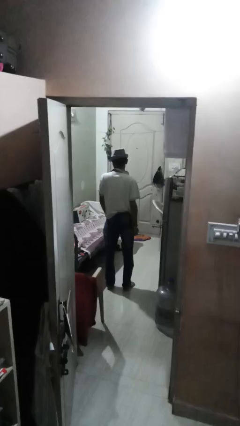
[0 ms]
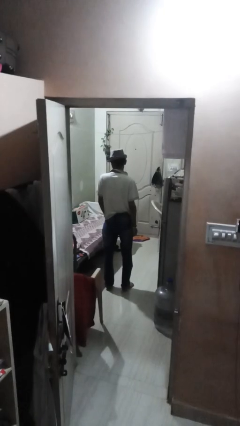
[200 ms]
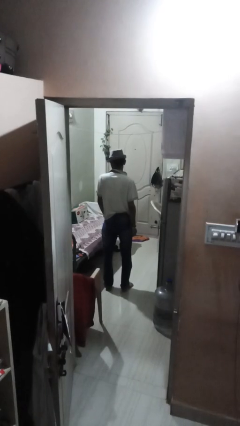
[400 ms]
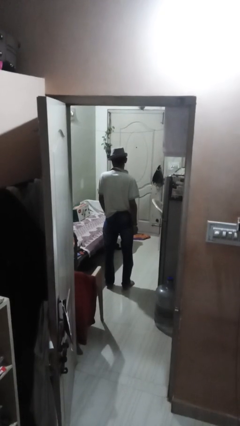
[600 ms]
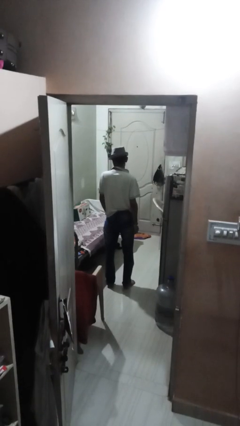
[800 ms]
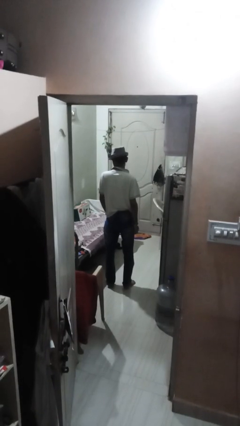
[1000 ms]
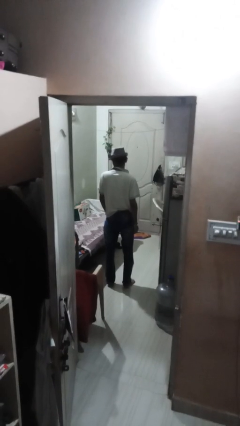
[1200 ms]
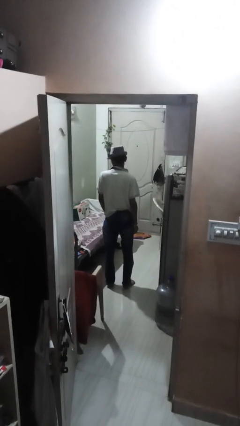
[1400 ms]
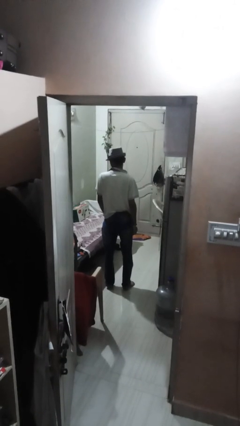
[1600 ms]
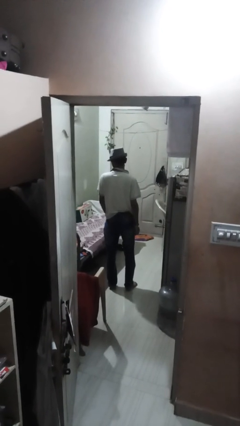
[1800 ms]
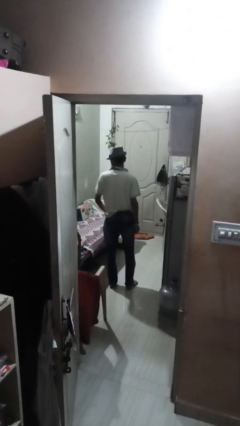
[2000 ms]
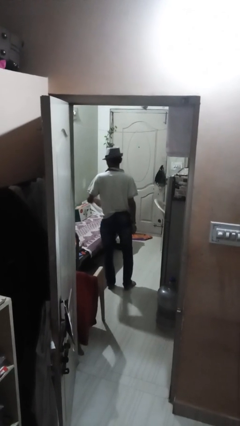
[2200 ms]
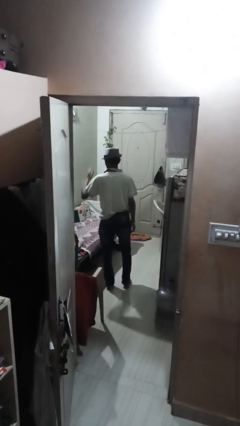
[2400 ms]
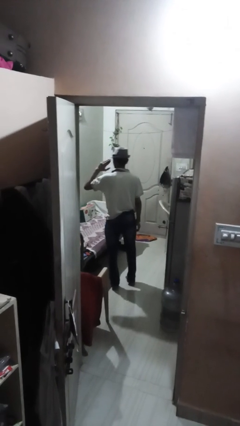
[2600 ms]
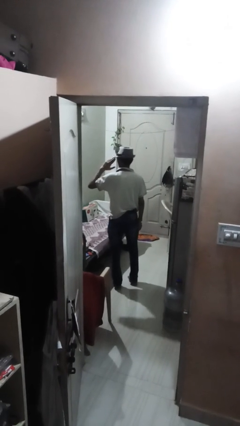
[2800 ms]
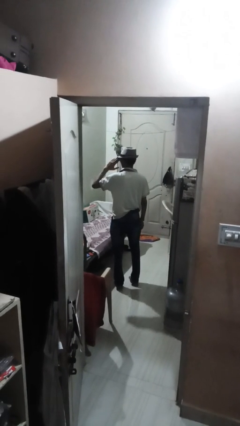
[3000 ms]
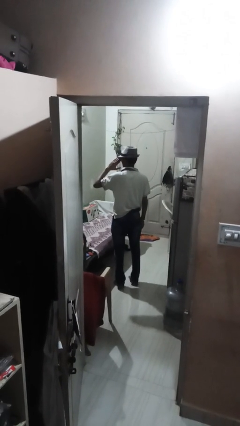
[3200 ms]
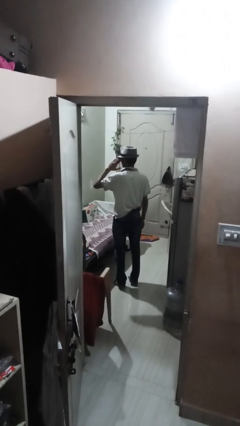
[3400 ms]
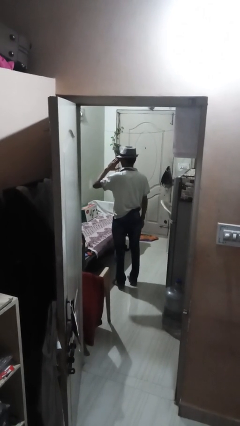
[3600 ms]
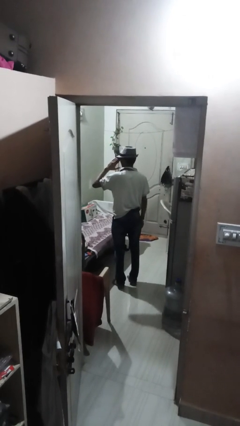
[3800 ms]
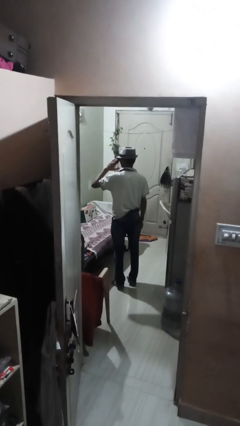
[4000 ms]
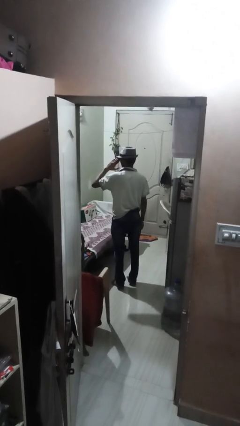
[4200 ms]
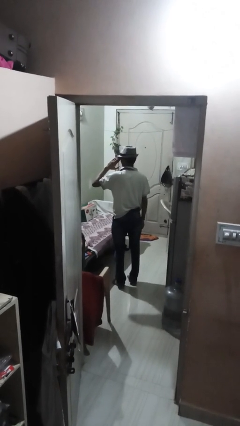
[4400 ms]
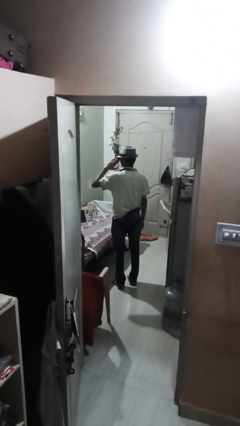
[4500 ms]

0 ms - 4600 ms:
person salutes

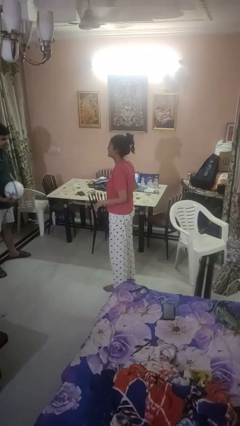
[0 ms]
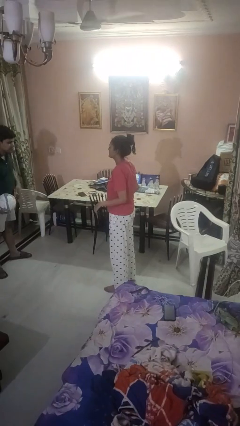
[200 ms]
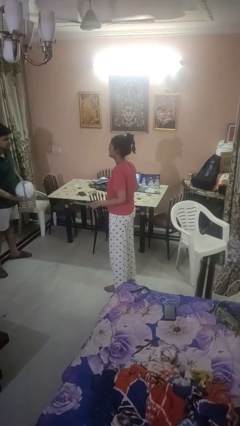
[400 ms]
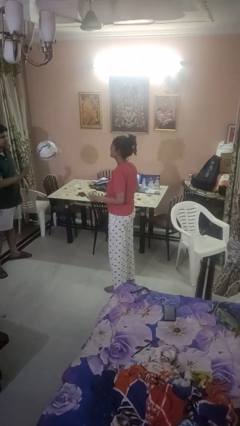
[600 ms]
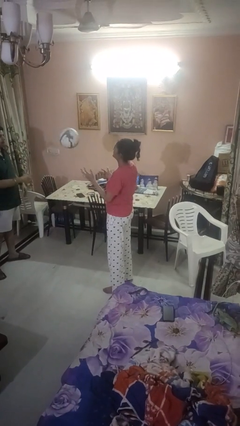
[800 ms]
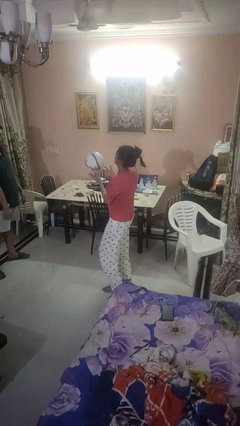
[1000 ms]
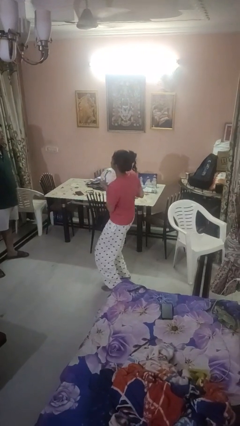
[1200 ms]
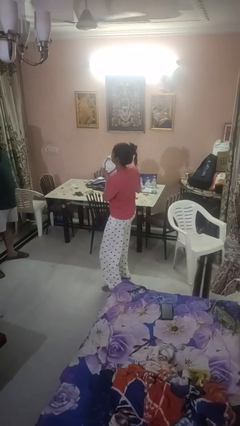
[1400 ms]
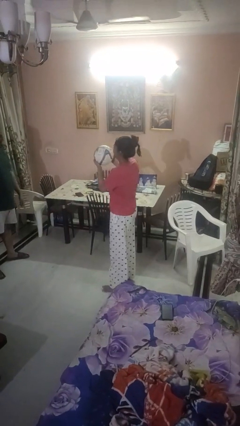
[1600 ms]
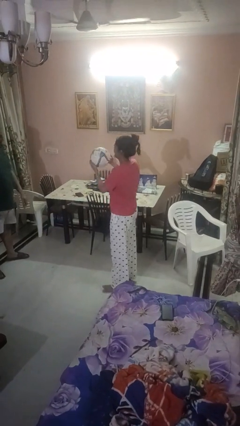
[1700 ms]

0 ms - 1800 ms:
person catches object from person

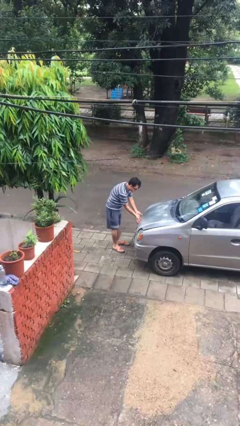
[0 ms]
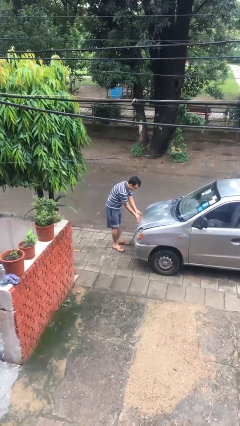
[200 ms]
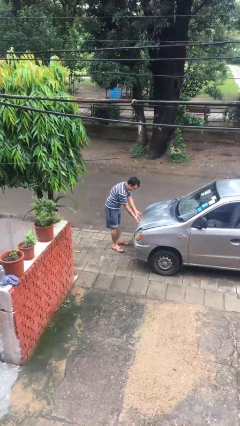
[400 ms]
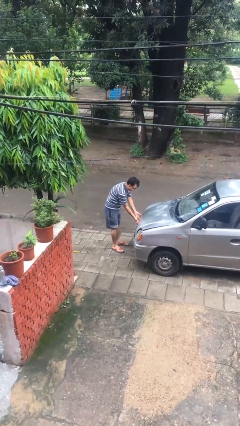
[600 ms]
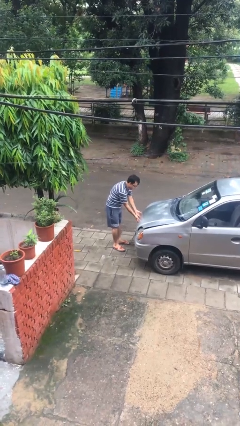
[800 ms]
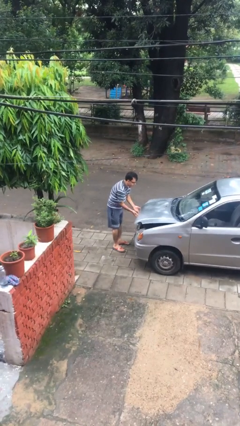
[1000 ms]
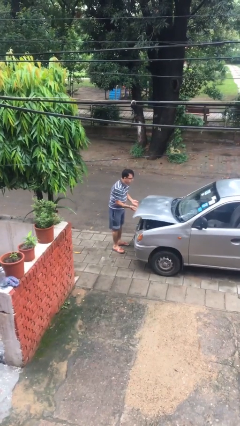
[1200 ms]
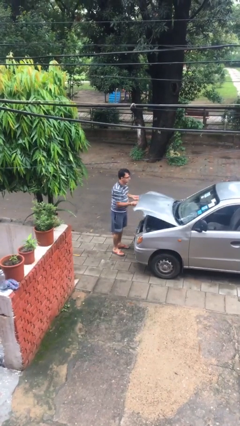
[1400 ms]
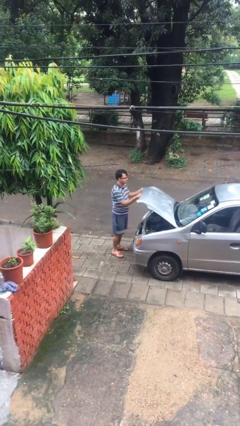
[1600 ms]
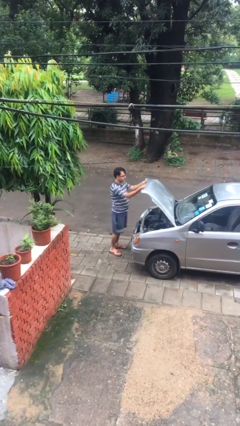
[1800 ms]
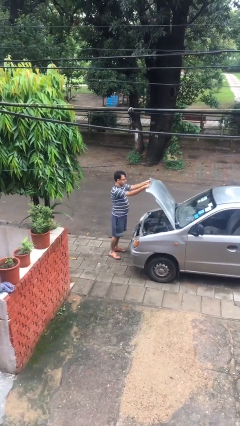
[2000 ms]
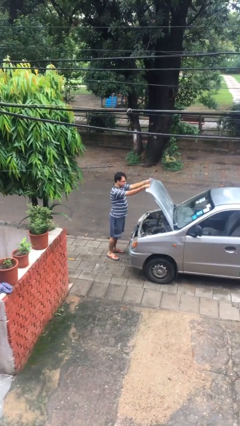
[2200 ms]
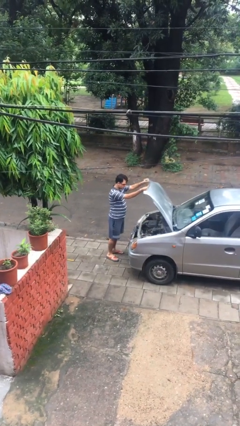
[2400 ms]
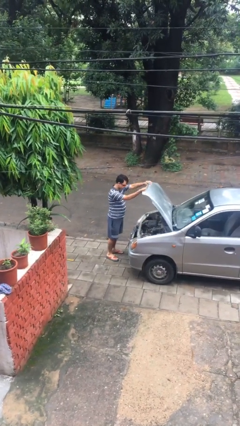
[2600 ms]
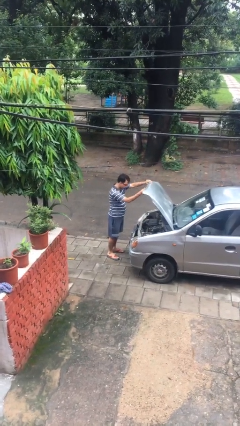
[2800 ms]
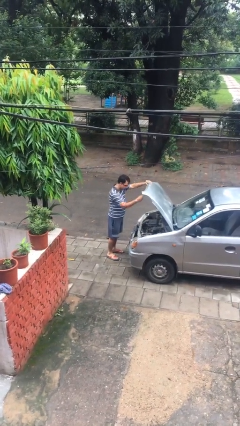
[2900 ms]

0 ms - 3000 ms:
person opens car hood

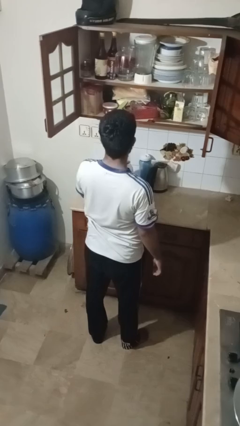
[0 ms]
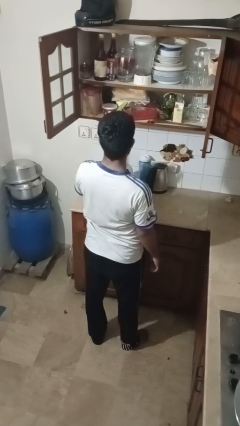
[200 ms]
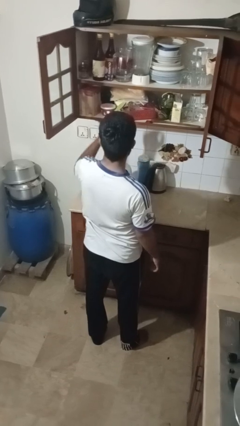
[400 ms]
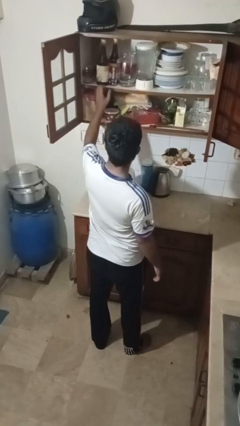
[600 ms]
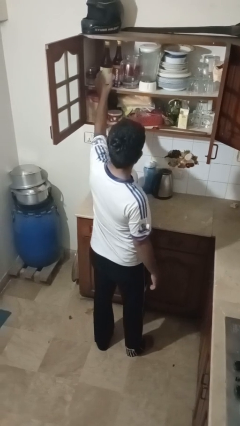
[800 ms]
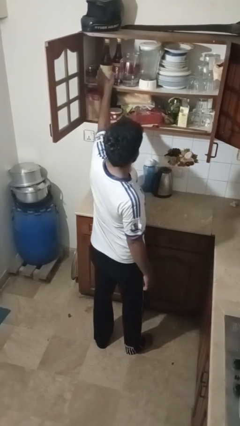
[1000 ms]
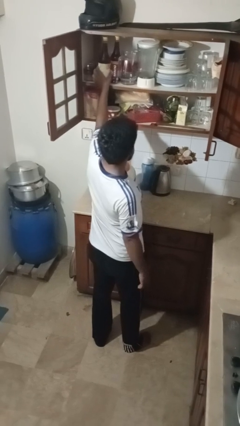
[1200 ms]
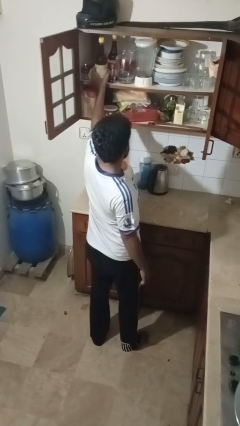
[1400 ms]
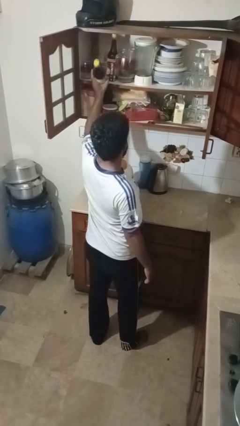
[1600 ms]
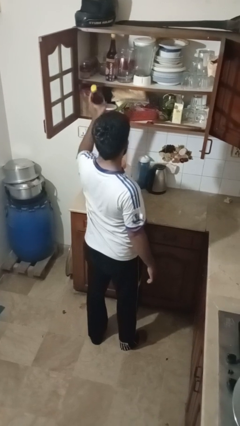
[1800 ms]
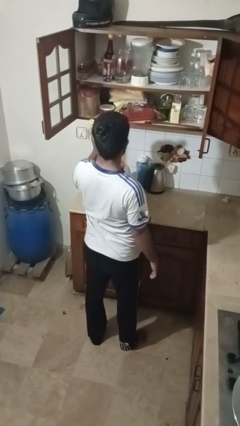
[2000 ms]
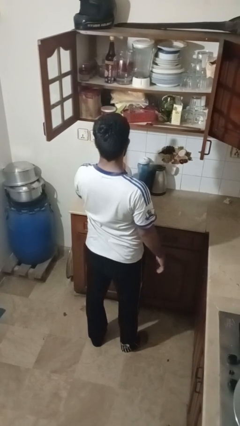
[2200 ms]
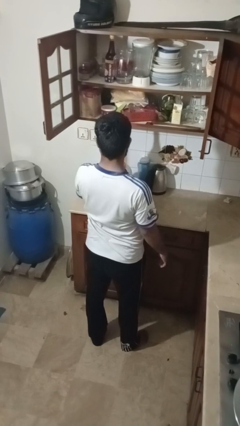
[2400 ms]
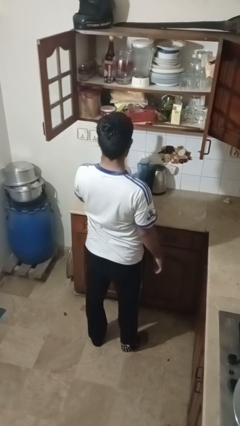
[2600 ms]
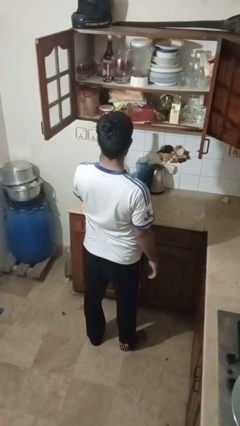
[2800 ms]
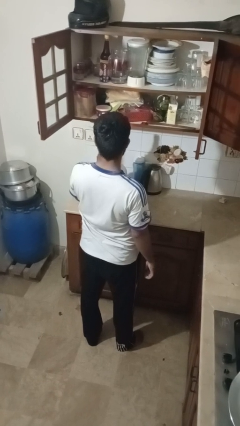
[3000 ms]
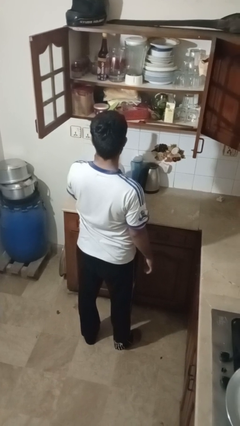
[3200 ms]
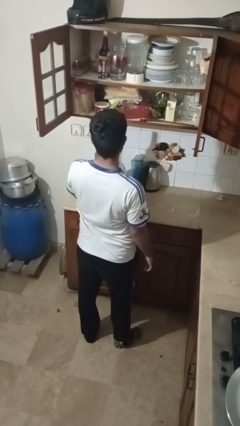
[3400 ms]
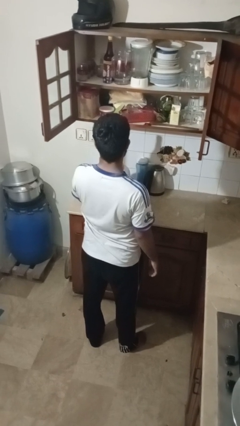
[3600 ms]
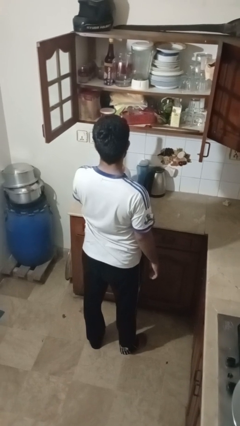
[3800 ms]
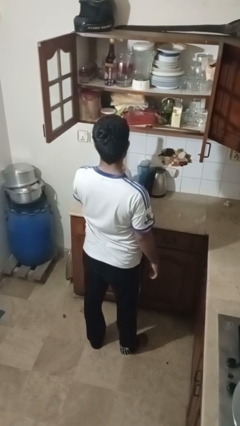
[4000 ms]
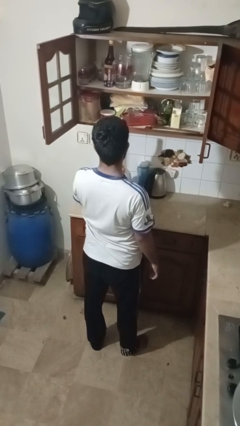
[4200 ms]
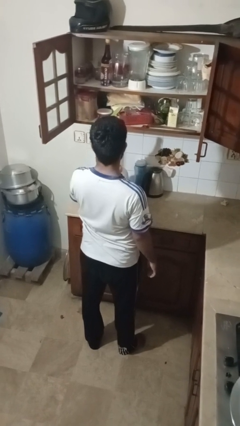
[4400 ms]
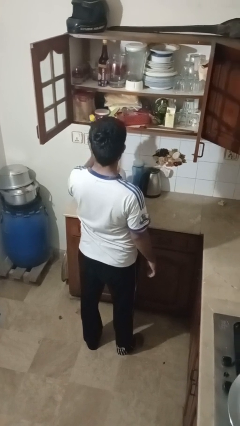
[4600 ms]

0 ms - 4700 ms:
person takes object from cabinet

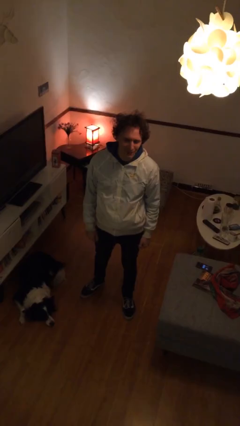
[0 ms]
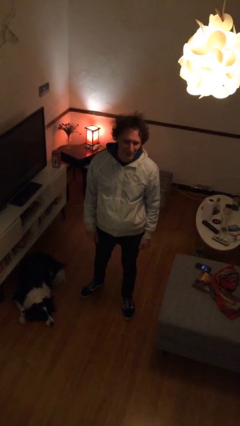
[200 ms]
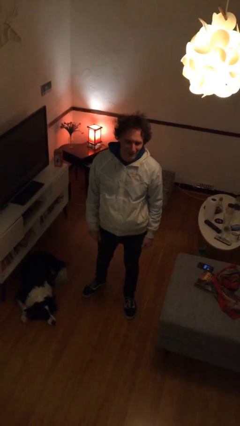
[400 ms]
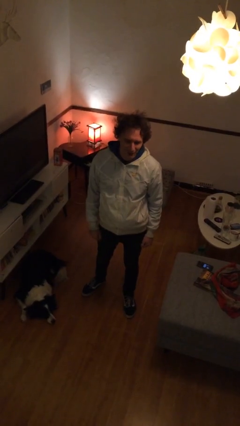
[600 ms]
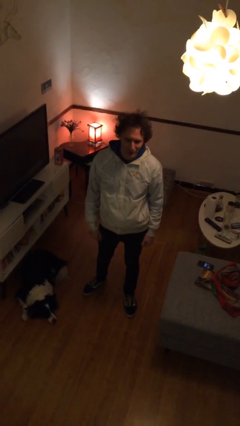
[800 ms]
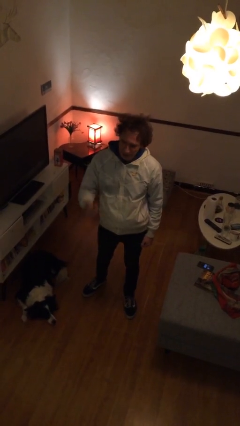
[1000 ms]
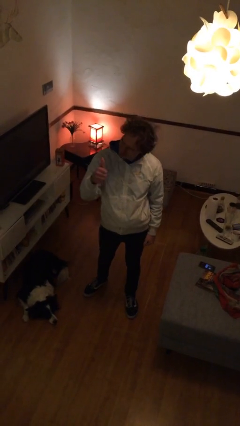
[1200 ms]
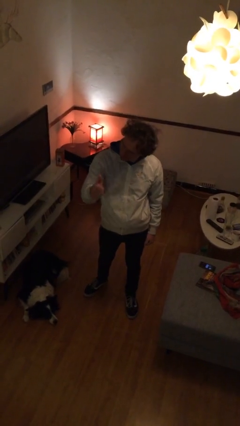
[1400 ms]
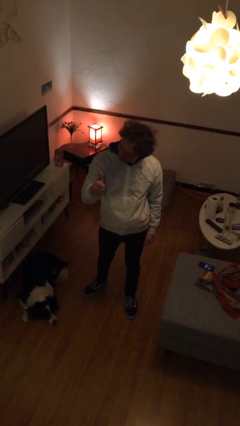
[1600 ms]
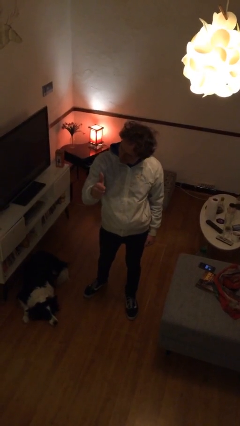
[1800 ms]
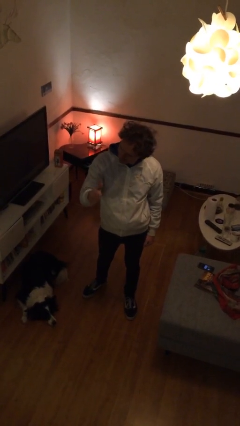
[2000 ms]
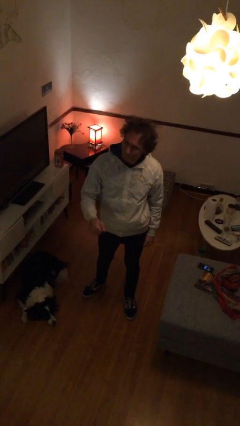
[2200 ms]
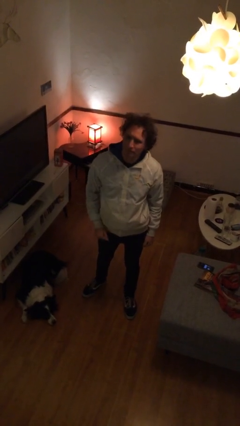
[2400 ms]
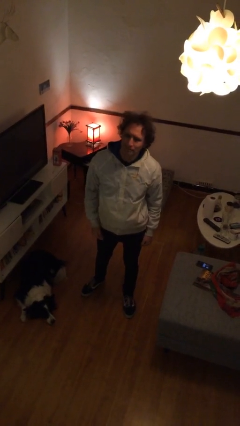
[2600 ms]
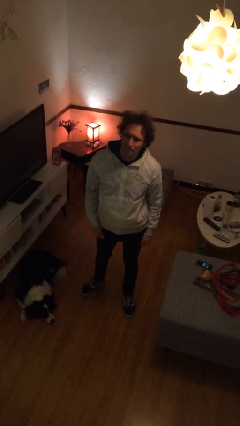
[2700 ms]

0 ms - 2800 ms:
person gestures thumbs up

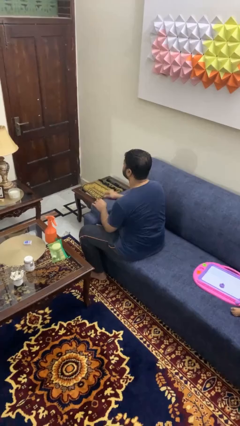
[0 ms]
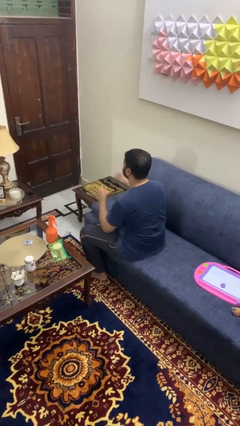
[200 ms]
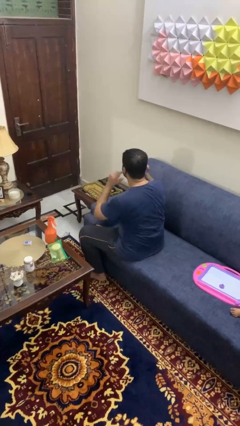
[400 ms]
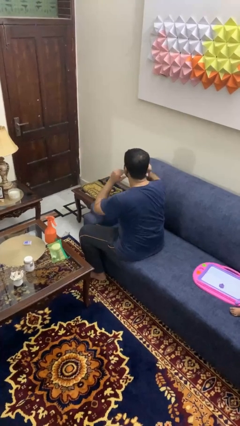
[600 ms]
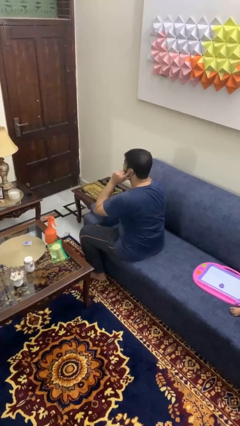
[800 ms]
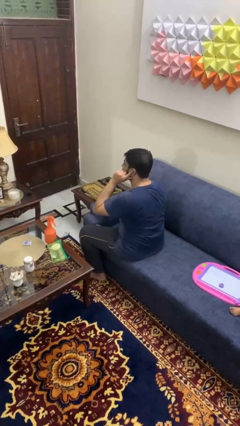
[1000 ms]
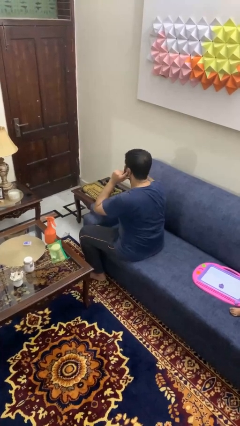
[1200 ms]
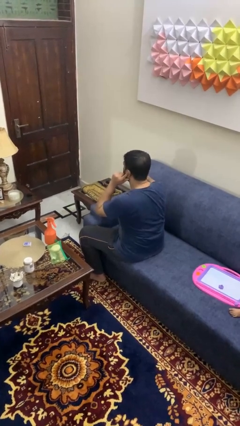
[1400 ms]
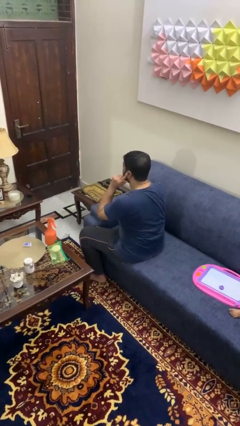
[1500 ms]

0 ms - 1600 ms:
person puts fingers in ear
